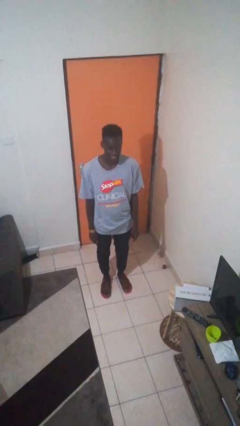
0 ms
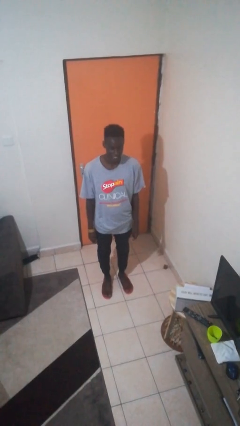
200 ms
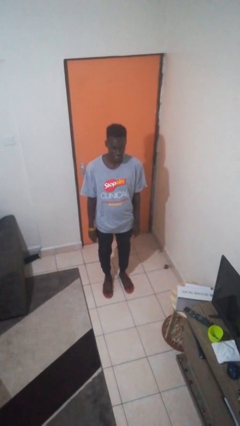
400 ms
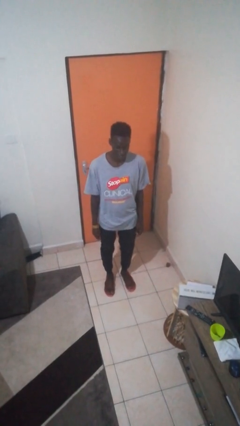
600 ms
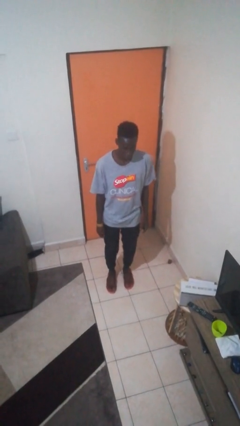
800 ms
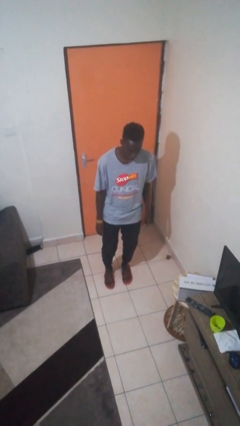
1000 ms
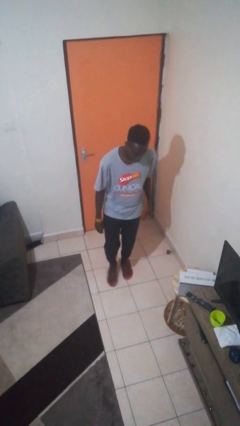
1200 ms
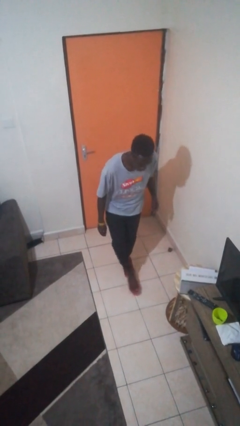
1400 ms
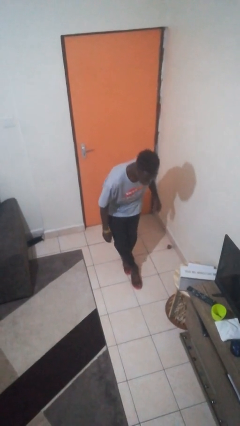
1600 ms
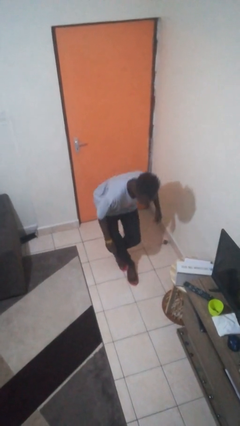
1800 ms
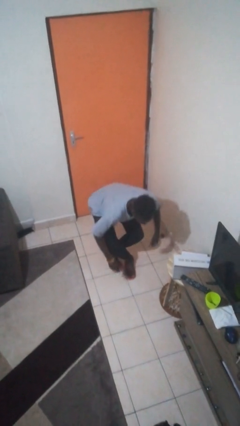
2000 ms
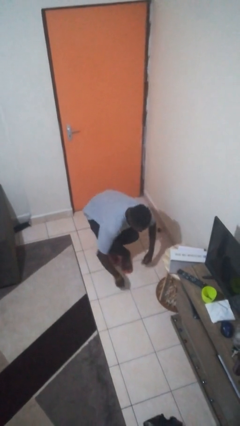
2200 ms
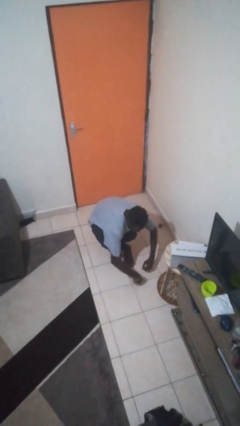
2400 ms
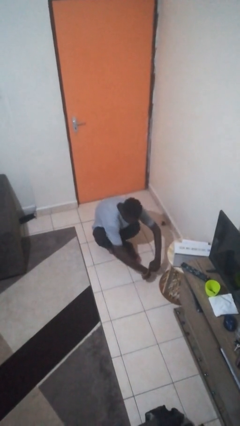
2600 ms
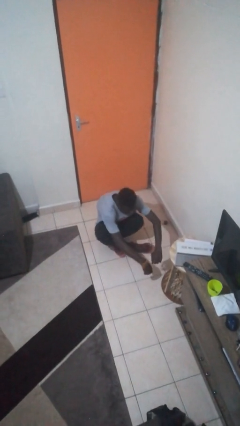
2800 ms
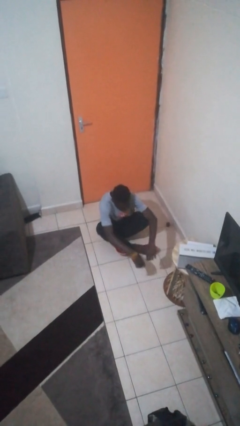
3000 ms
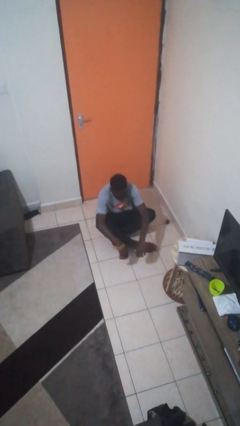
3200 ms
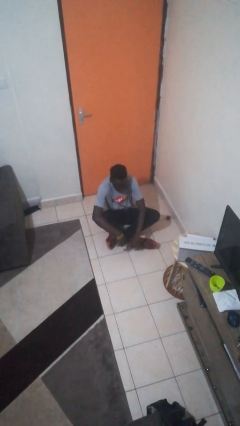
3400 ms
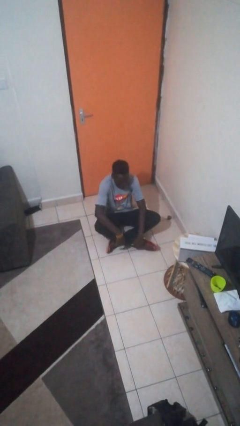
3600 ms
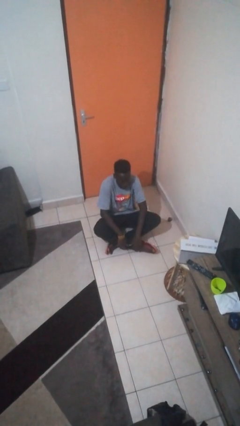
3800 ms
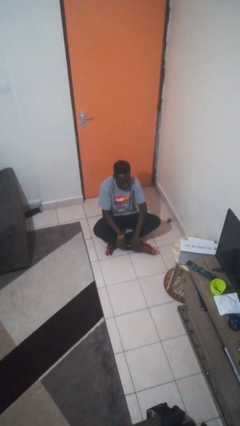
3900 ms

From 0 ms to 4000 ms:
person sits crisscross

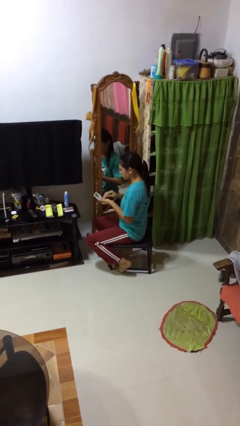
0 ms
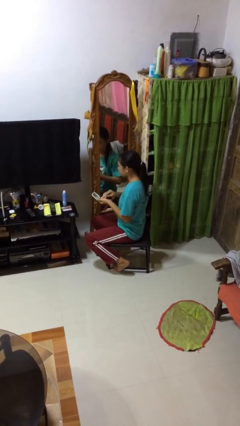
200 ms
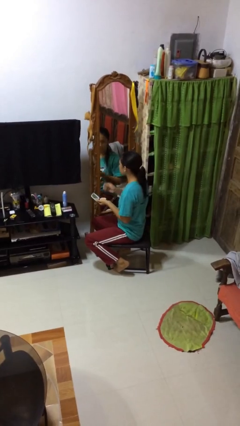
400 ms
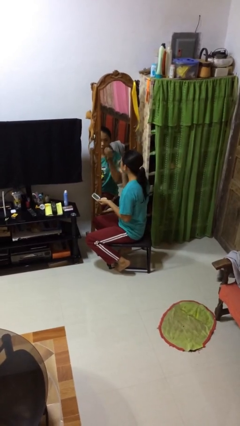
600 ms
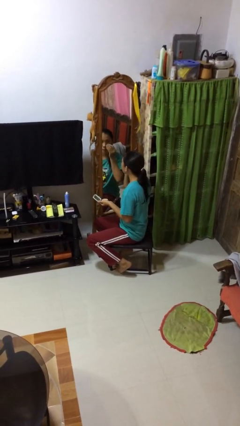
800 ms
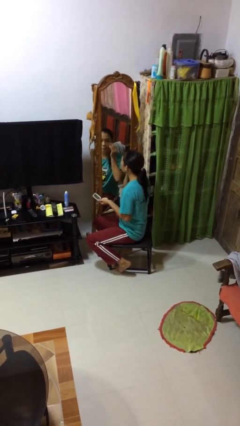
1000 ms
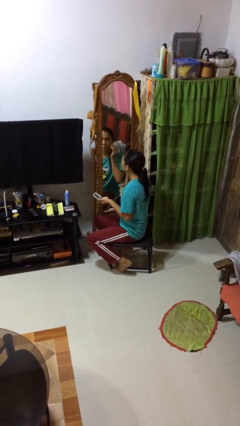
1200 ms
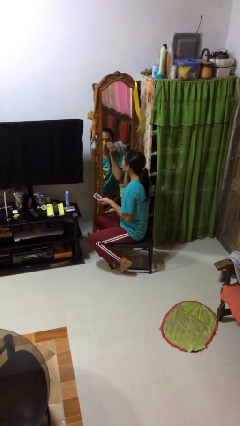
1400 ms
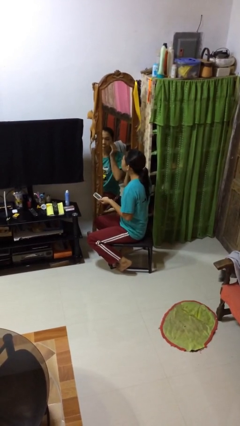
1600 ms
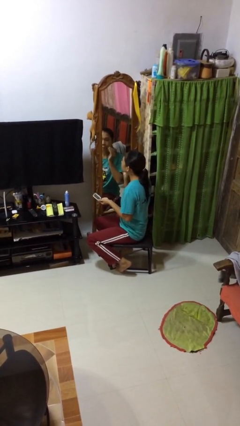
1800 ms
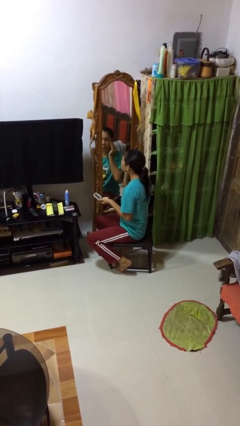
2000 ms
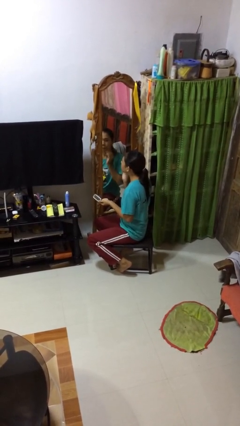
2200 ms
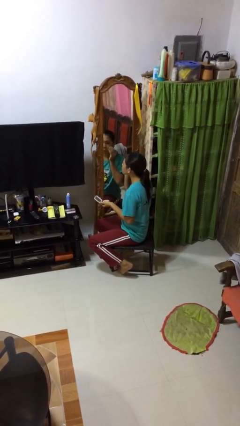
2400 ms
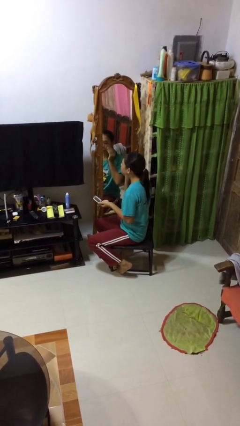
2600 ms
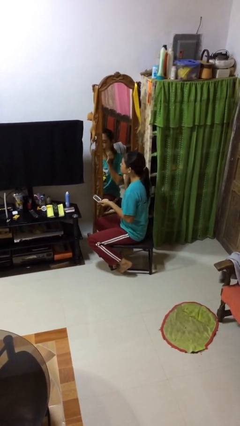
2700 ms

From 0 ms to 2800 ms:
person applies foundation makeup

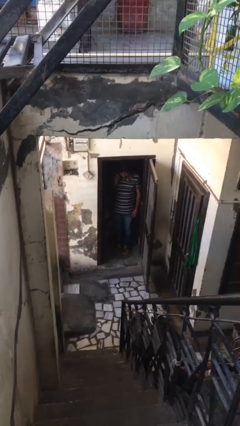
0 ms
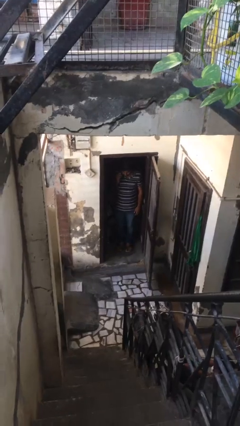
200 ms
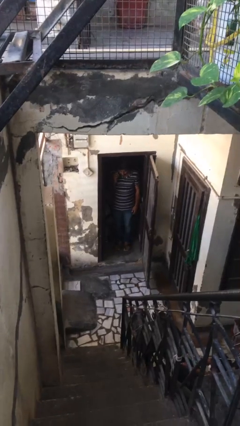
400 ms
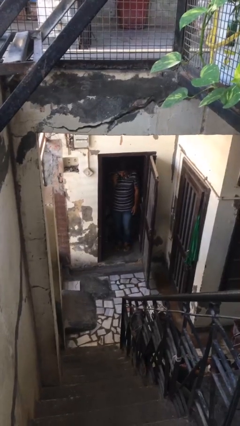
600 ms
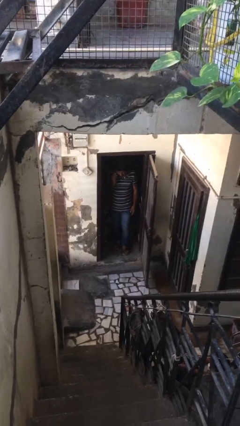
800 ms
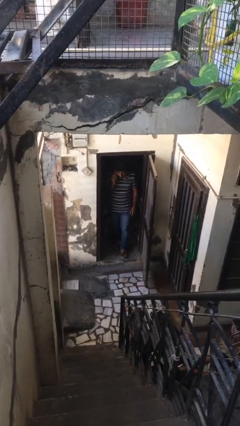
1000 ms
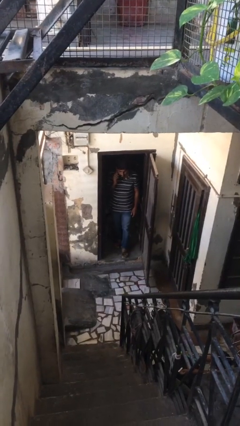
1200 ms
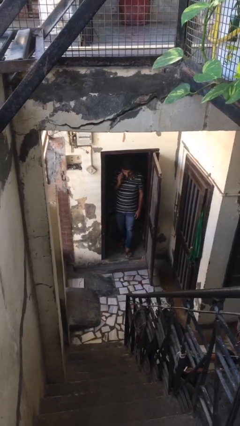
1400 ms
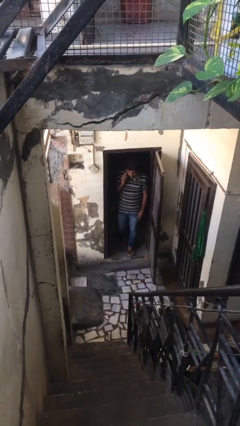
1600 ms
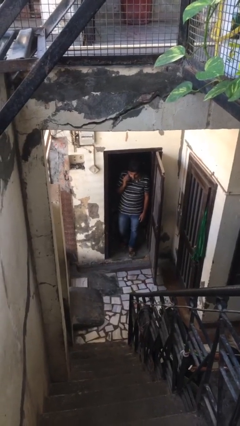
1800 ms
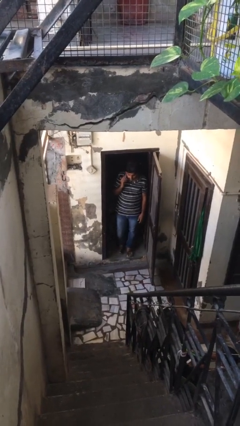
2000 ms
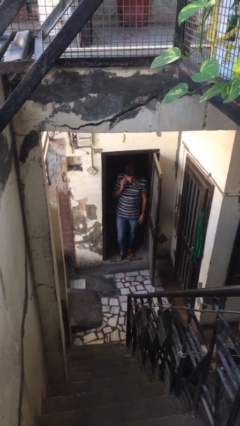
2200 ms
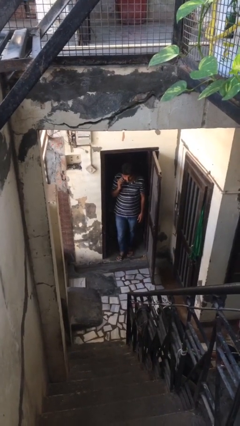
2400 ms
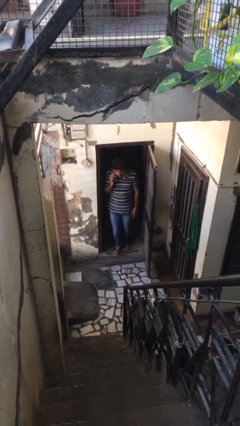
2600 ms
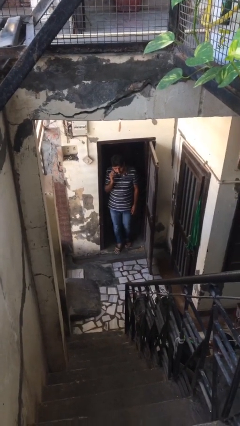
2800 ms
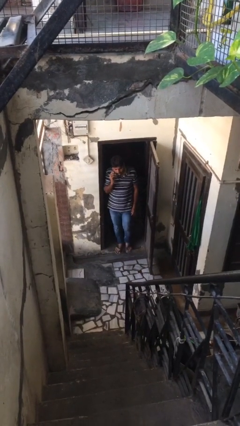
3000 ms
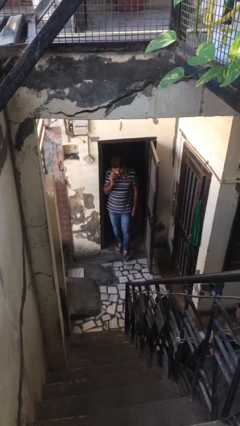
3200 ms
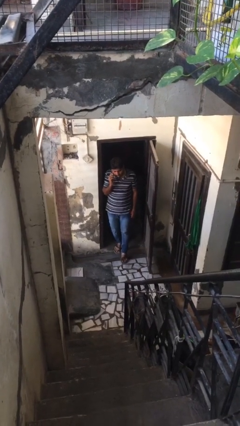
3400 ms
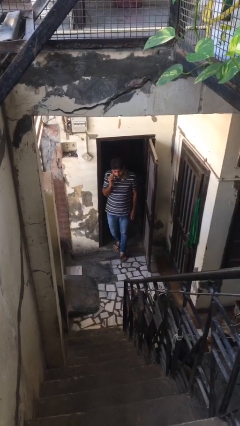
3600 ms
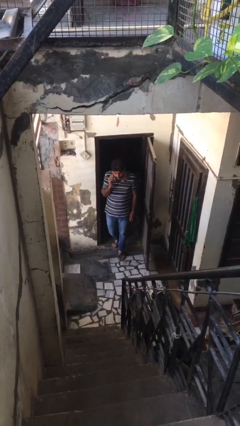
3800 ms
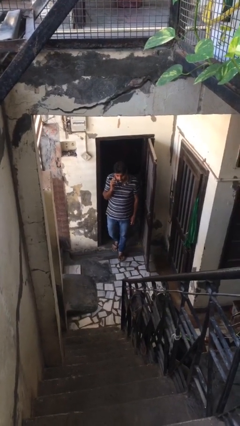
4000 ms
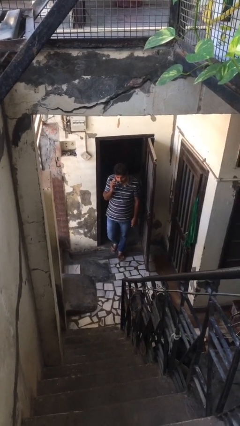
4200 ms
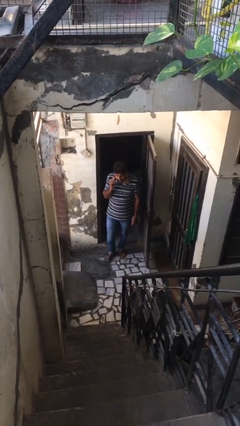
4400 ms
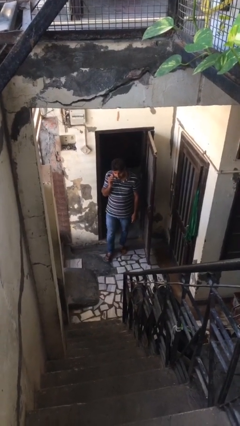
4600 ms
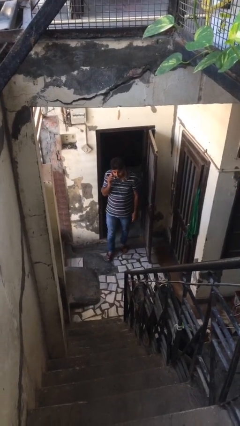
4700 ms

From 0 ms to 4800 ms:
person enters scene through structure

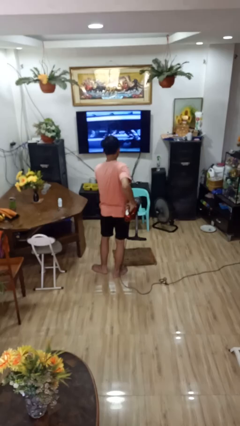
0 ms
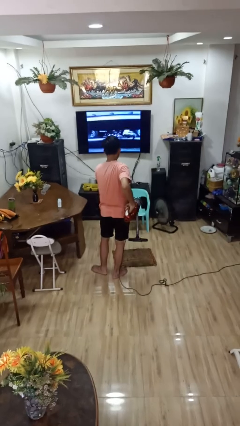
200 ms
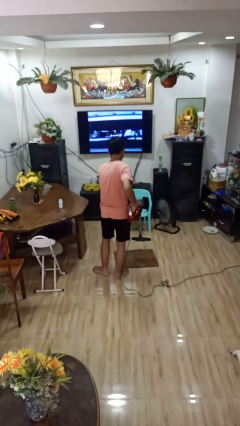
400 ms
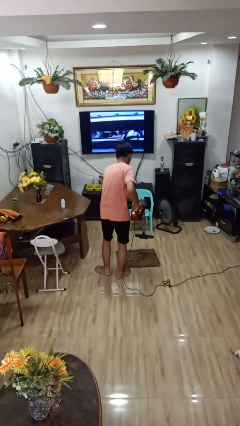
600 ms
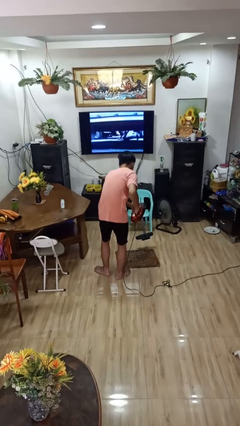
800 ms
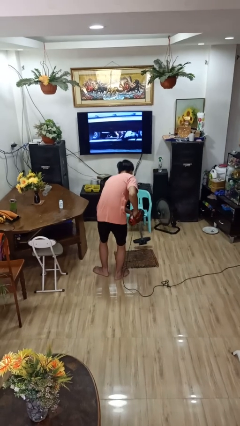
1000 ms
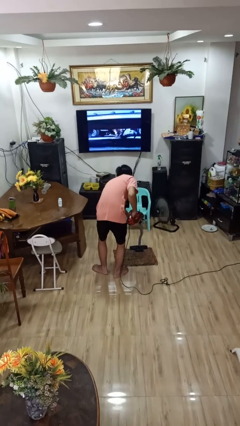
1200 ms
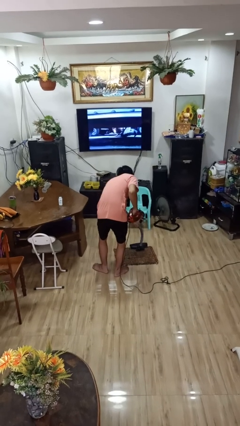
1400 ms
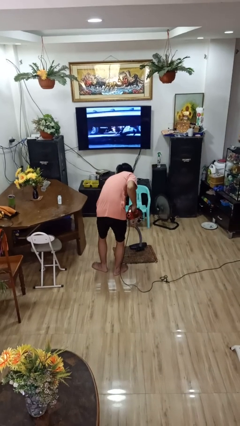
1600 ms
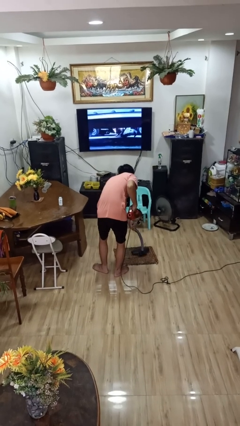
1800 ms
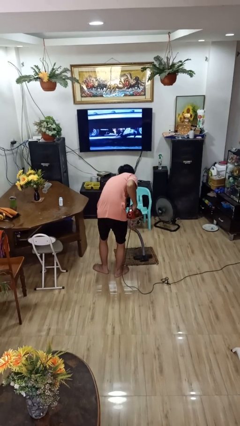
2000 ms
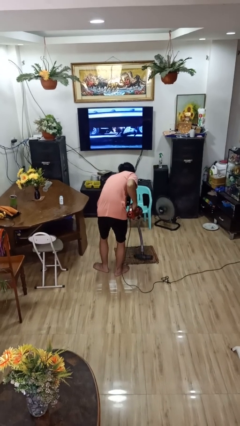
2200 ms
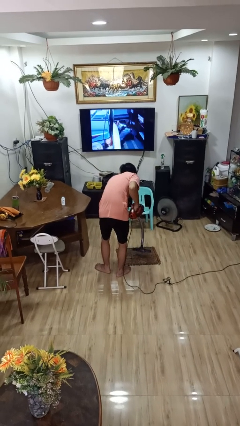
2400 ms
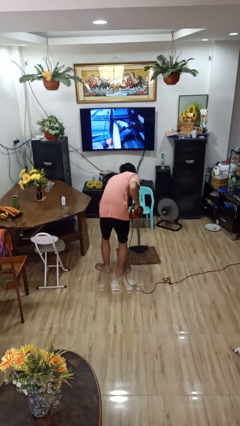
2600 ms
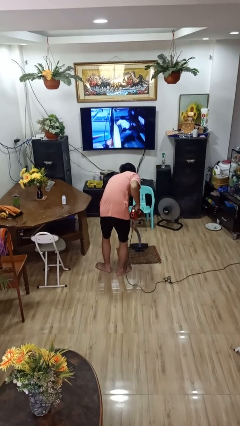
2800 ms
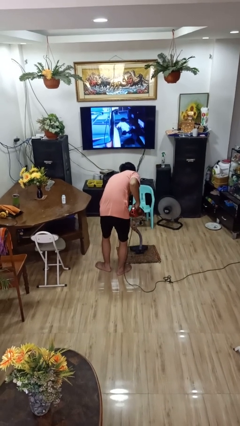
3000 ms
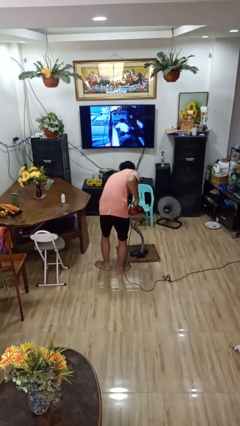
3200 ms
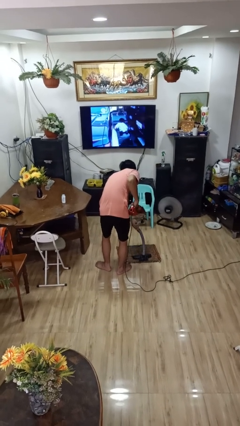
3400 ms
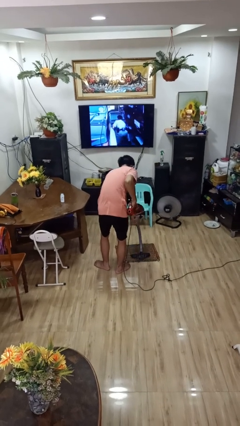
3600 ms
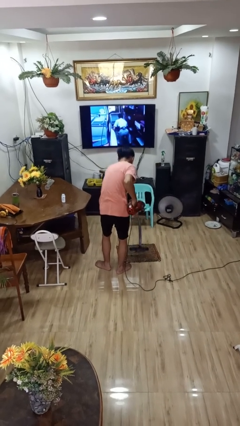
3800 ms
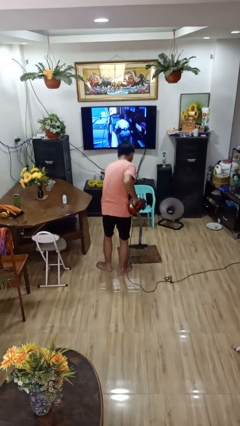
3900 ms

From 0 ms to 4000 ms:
person vacuums carpet

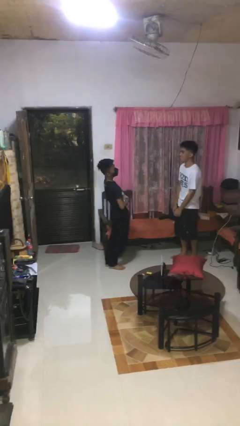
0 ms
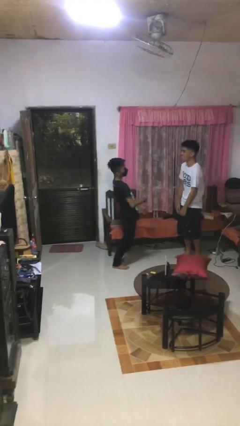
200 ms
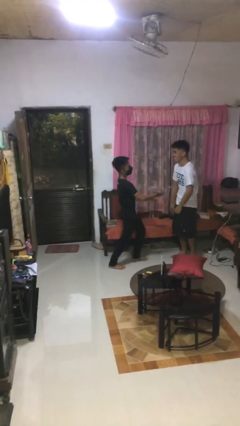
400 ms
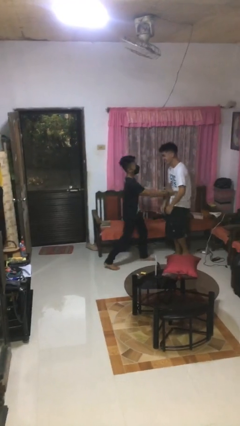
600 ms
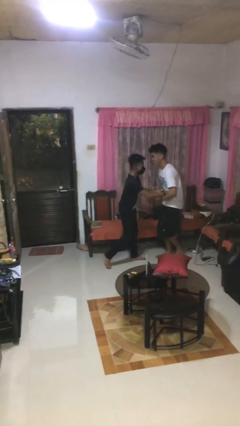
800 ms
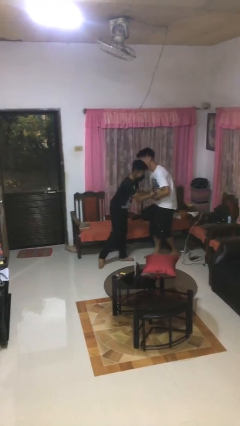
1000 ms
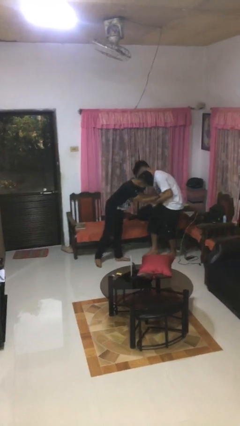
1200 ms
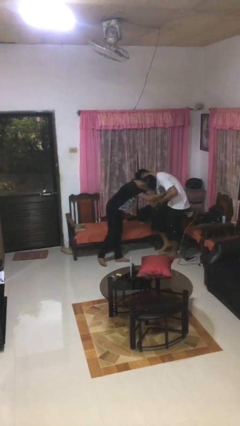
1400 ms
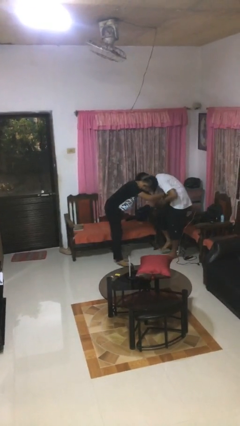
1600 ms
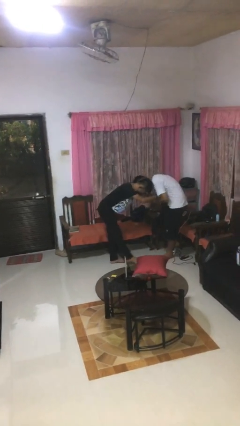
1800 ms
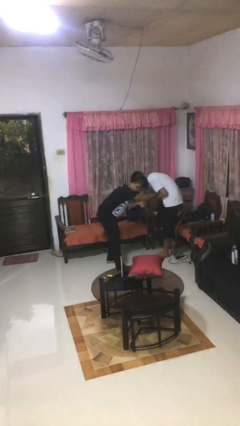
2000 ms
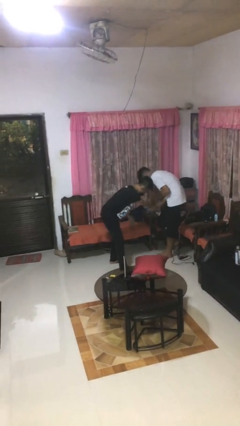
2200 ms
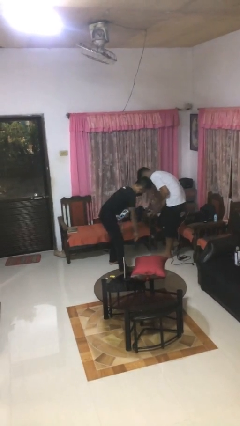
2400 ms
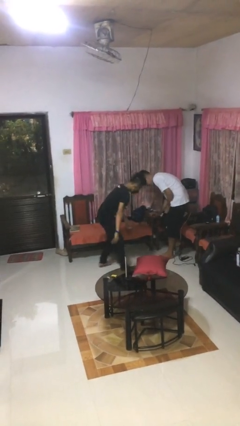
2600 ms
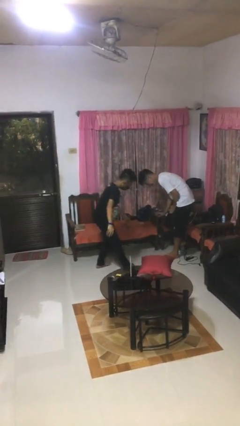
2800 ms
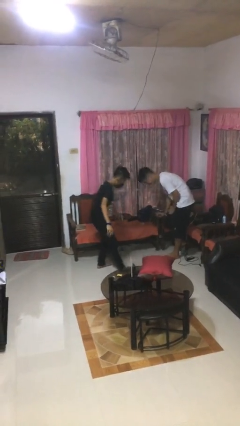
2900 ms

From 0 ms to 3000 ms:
person tickles person
